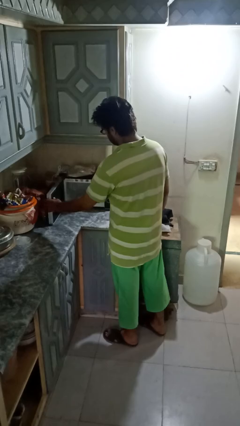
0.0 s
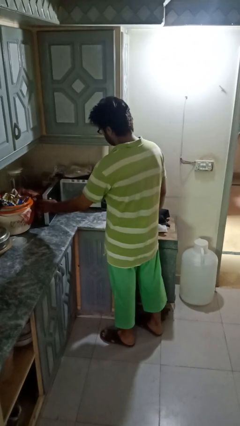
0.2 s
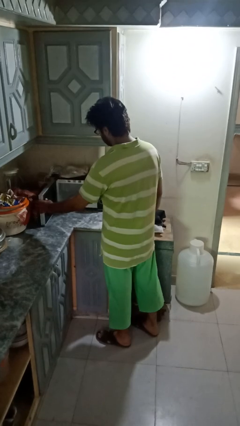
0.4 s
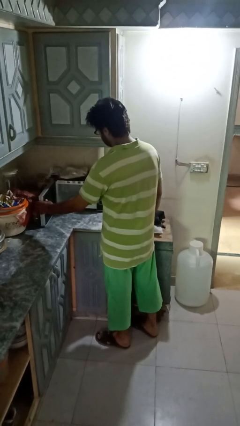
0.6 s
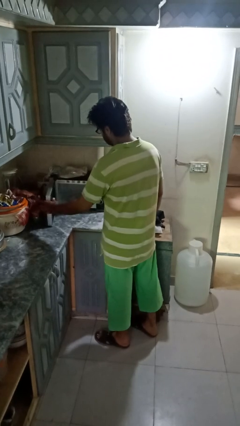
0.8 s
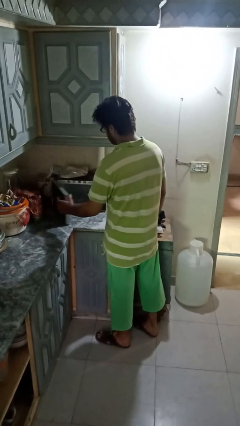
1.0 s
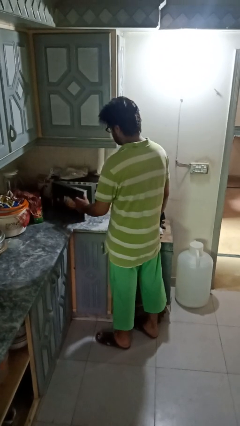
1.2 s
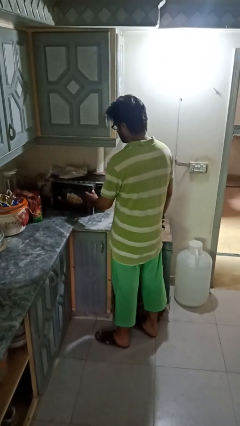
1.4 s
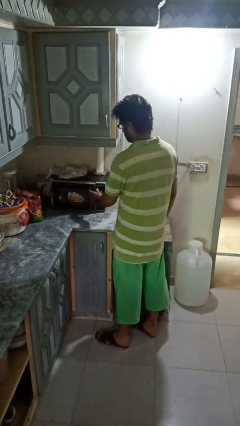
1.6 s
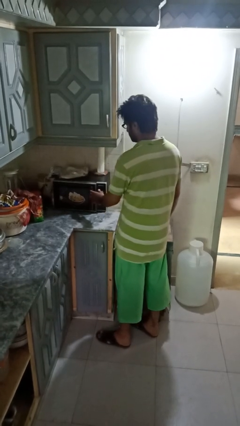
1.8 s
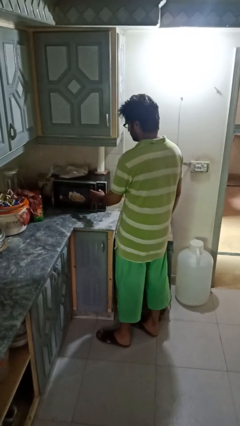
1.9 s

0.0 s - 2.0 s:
person closes microwave

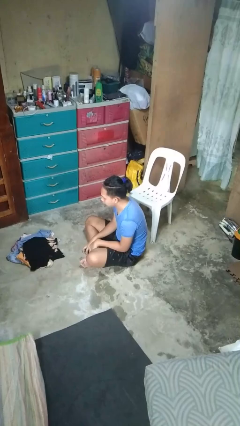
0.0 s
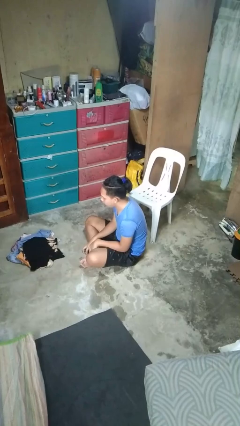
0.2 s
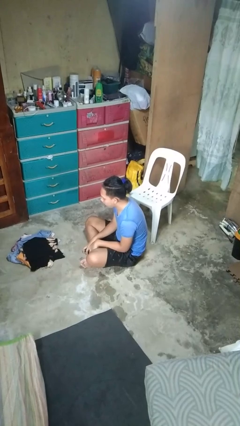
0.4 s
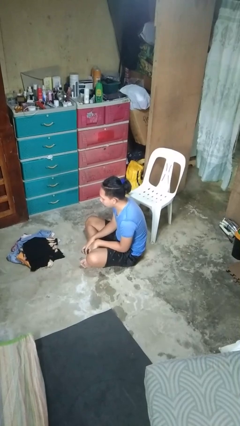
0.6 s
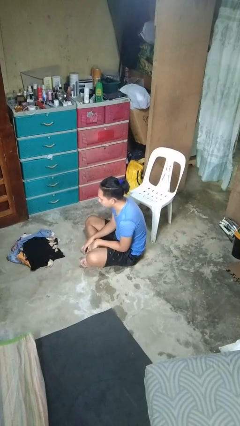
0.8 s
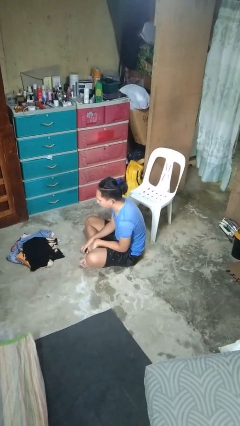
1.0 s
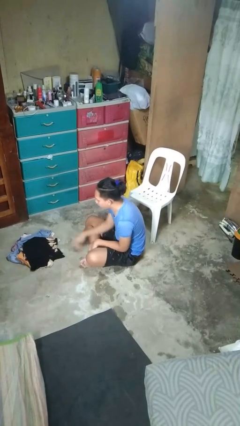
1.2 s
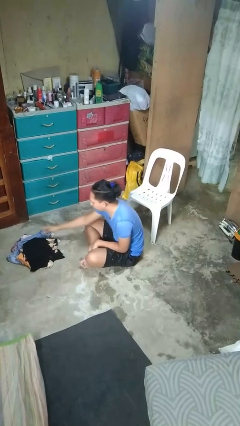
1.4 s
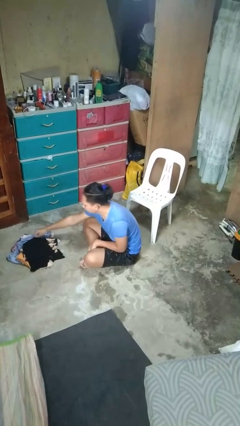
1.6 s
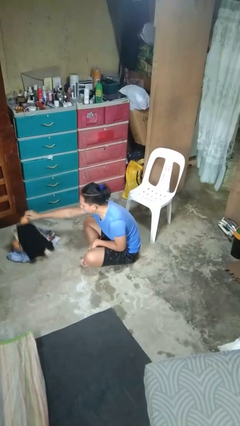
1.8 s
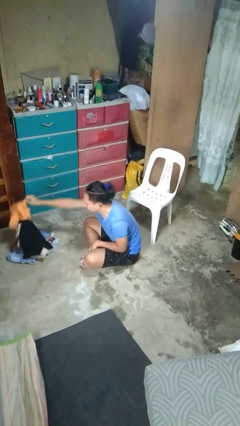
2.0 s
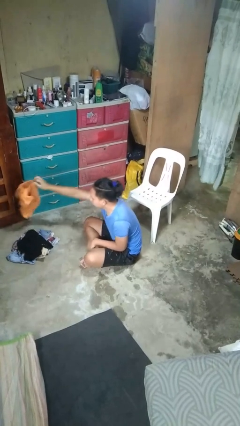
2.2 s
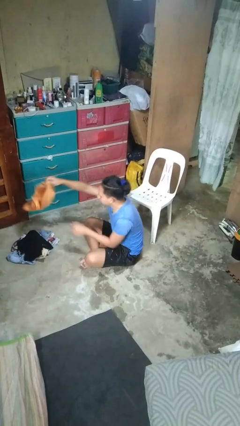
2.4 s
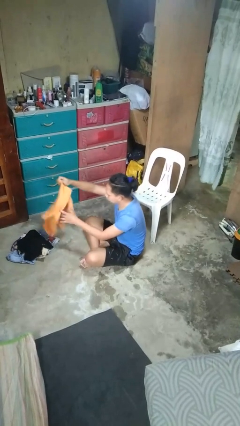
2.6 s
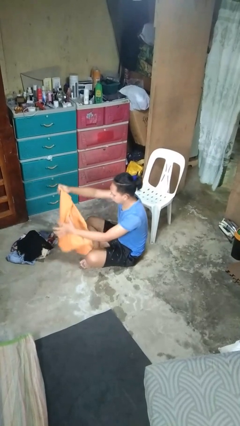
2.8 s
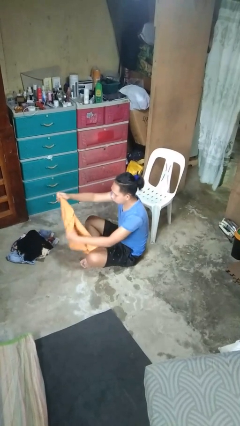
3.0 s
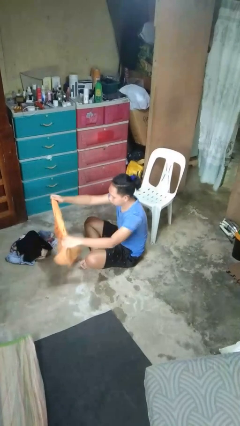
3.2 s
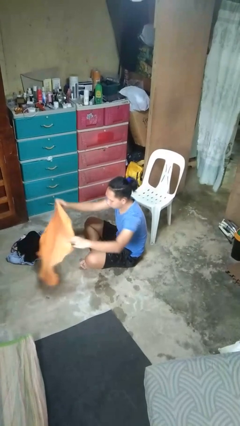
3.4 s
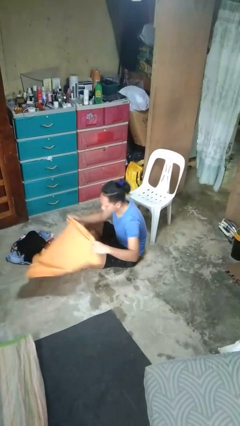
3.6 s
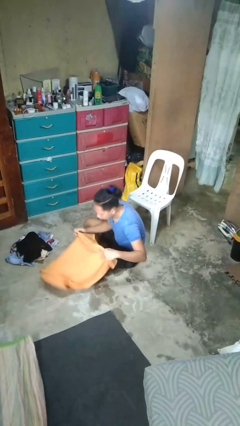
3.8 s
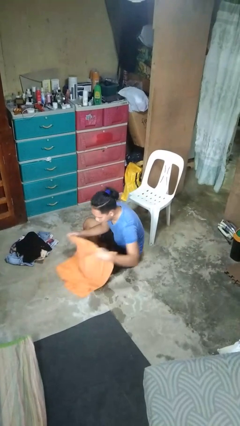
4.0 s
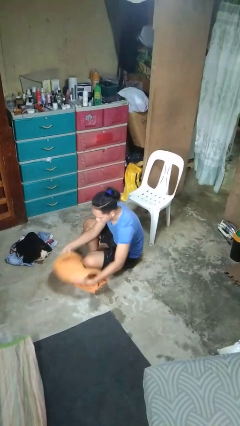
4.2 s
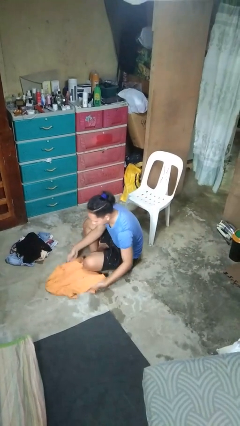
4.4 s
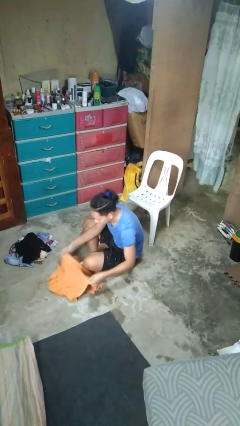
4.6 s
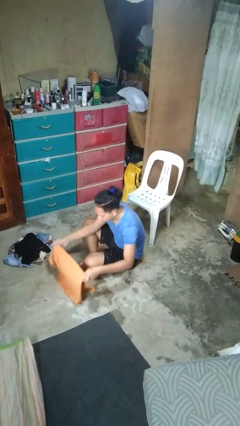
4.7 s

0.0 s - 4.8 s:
person folds shirt

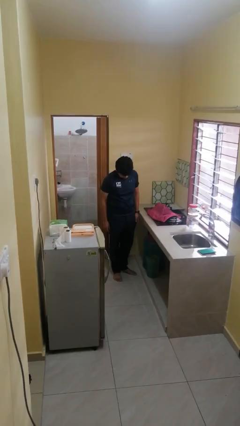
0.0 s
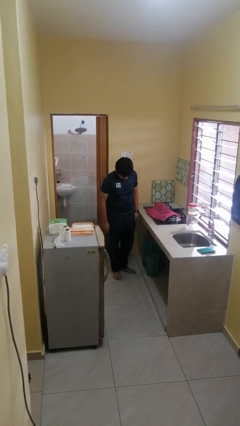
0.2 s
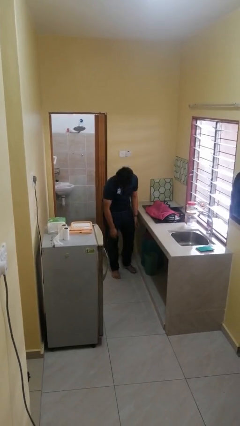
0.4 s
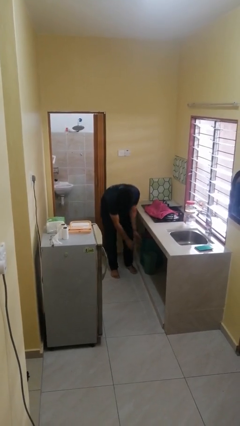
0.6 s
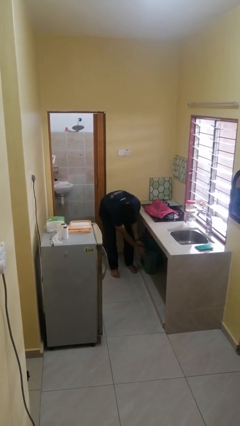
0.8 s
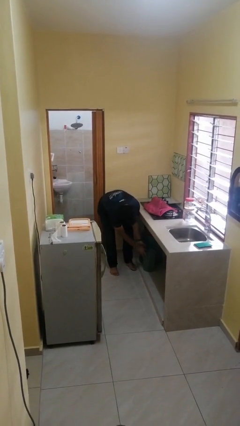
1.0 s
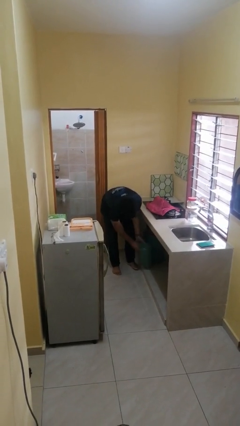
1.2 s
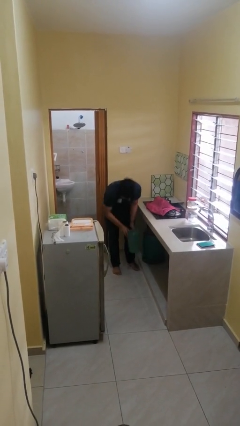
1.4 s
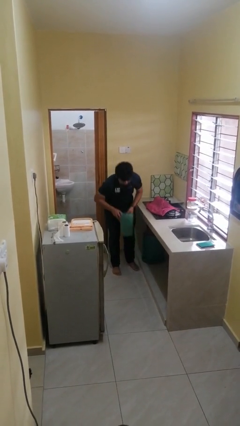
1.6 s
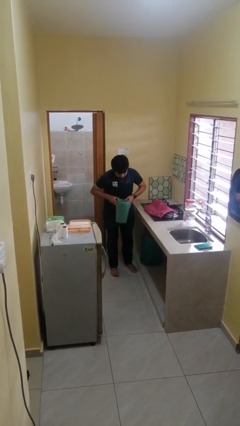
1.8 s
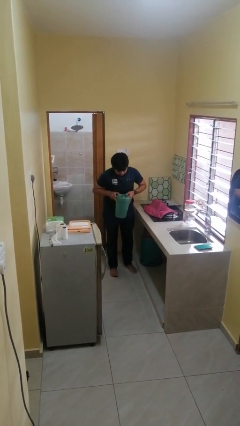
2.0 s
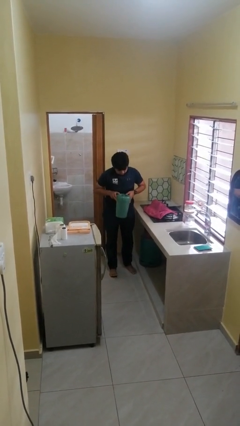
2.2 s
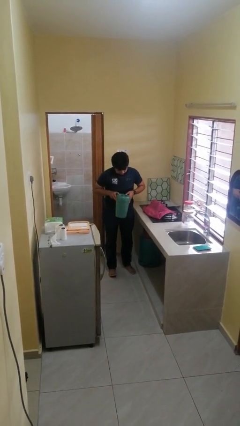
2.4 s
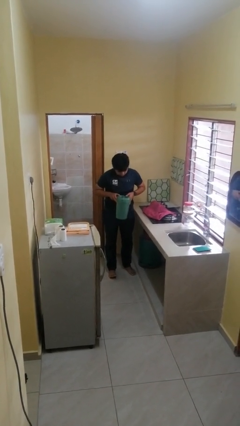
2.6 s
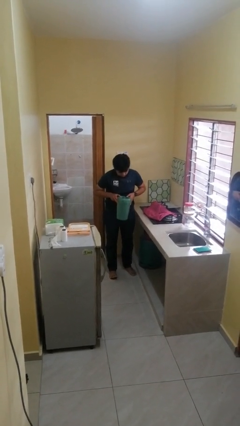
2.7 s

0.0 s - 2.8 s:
person picks up object from cabinet

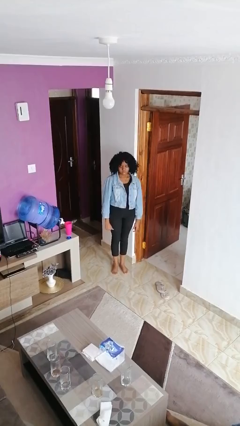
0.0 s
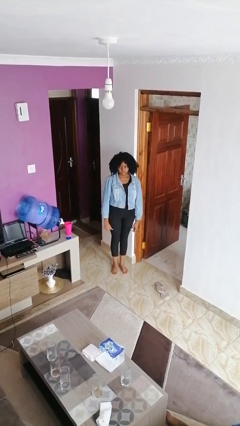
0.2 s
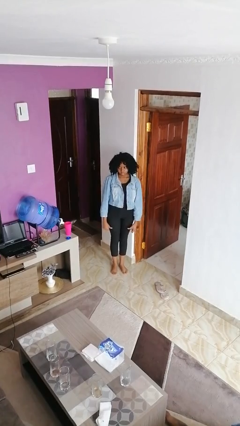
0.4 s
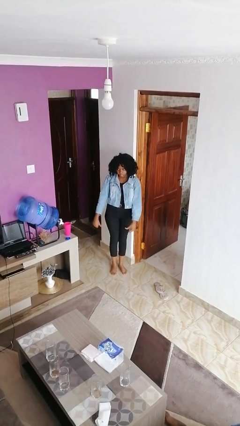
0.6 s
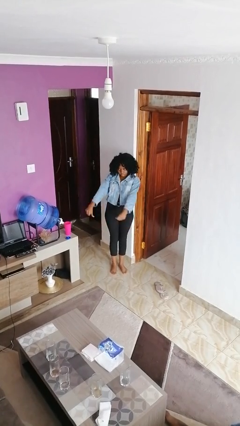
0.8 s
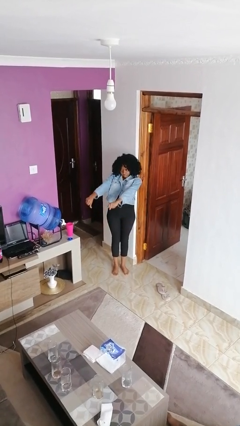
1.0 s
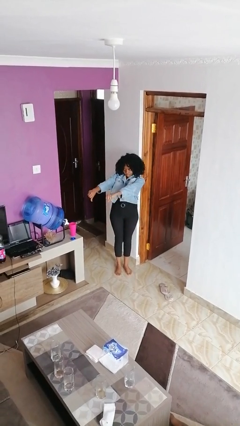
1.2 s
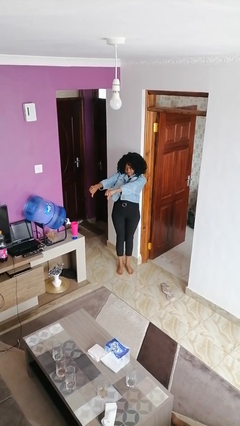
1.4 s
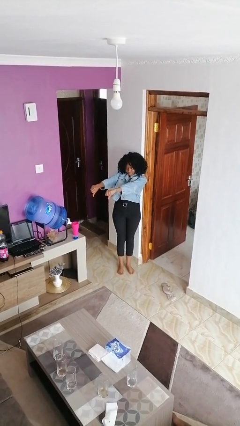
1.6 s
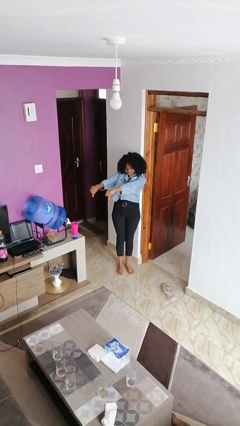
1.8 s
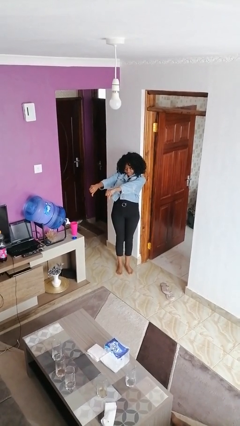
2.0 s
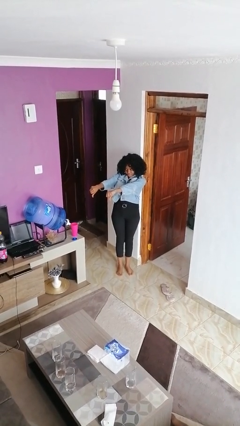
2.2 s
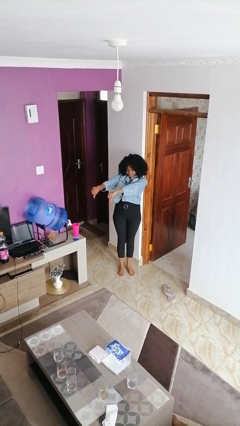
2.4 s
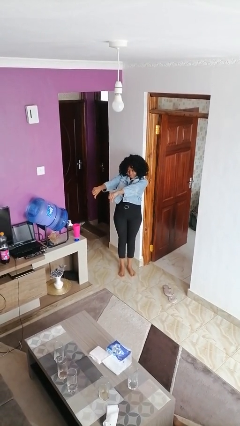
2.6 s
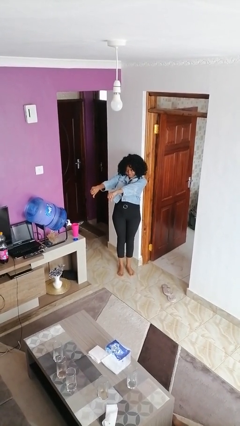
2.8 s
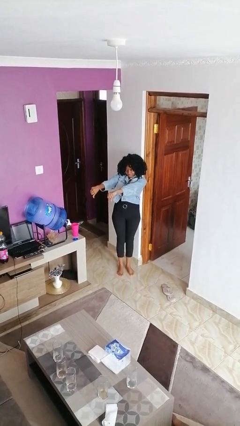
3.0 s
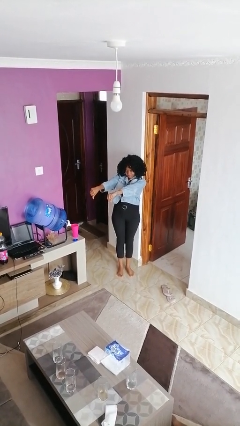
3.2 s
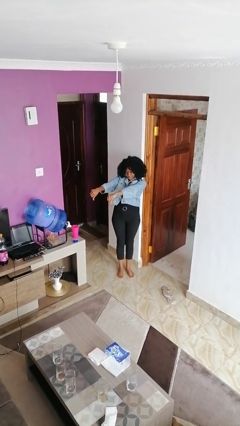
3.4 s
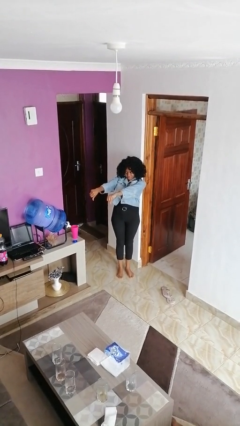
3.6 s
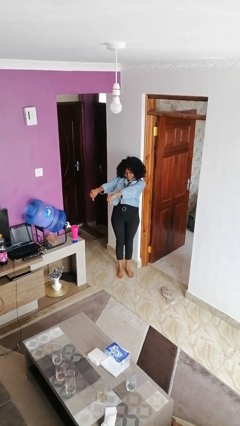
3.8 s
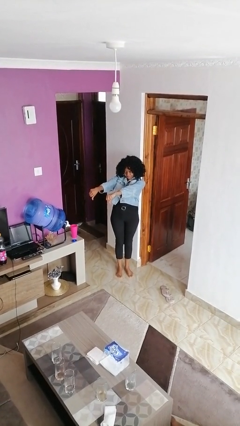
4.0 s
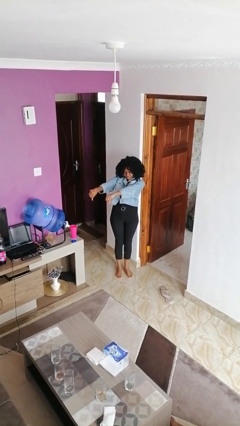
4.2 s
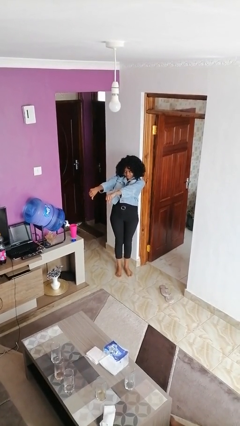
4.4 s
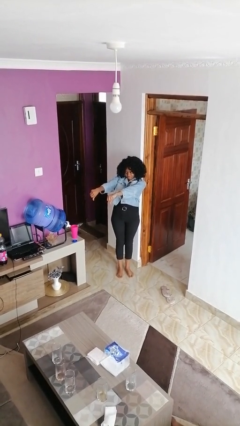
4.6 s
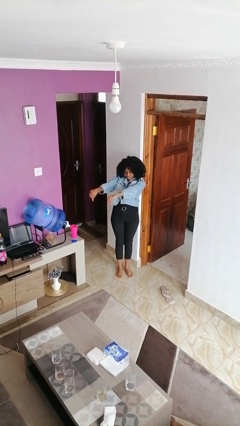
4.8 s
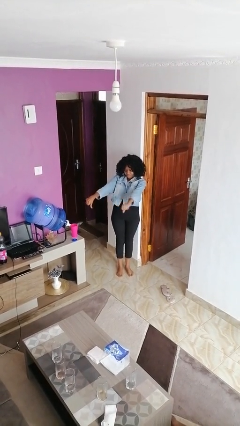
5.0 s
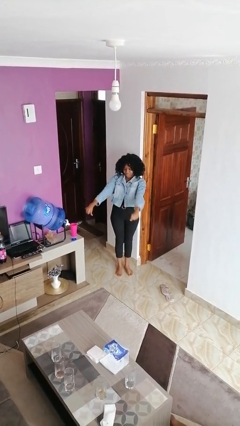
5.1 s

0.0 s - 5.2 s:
person gestures thumbs down

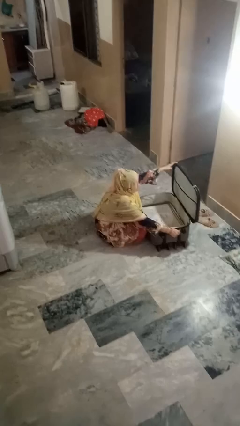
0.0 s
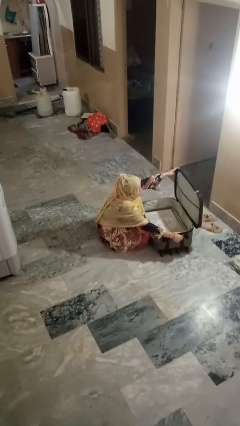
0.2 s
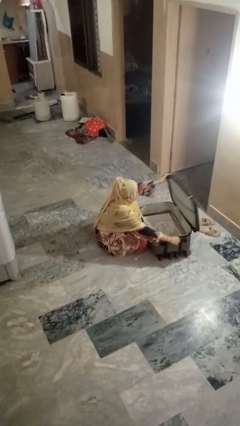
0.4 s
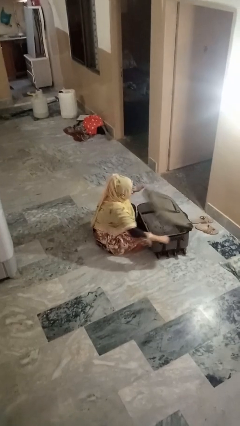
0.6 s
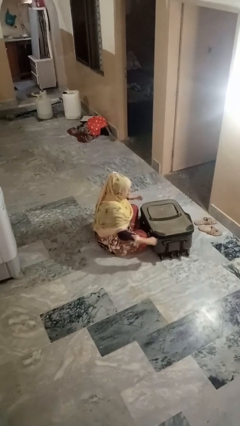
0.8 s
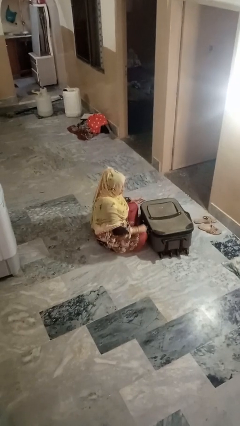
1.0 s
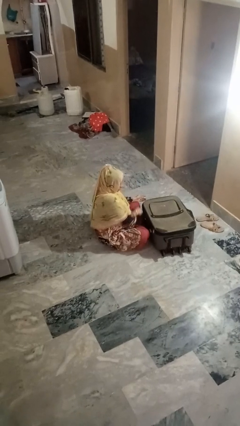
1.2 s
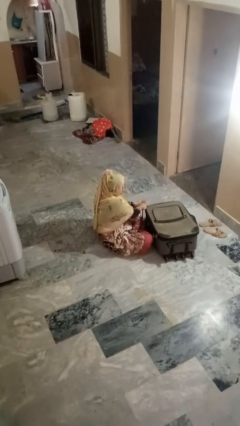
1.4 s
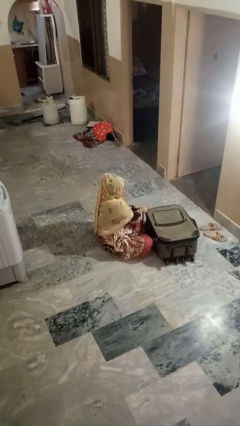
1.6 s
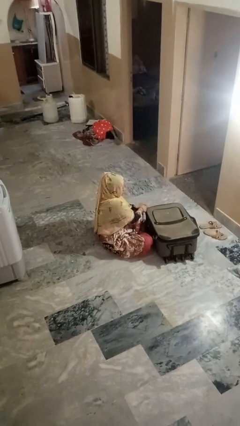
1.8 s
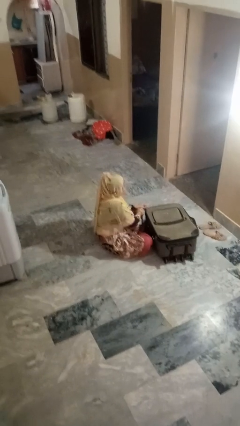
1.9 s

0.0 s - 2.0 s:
person closes suitcase
